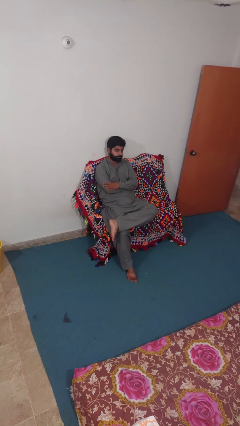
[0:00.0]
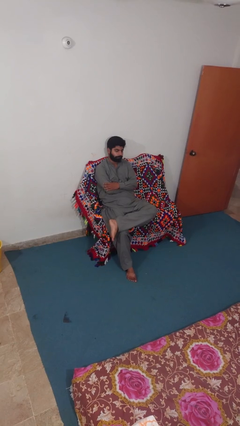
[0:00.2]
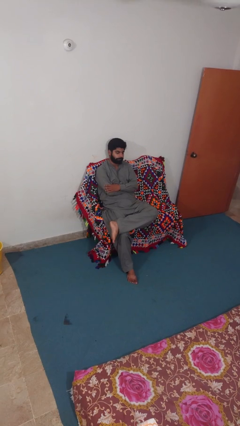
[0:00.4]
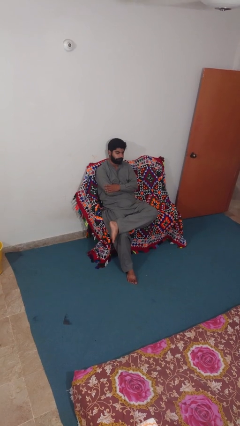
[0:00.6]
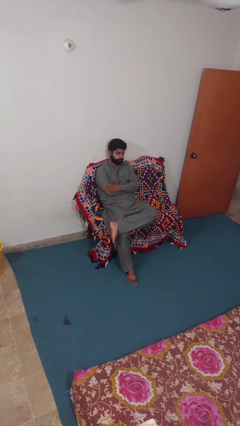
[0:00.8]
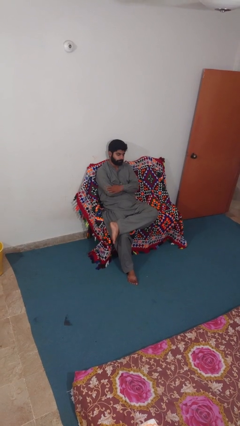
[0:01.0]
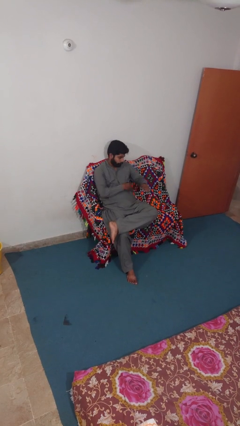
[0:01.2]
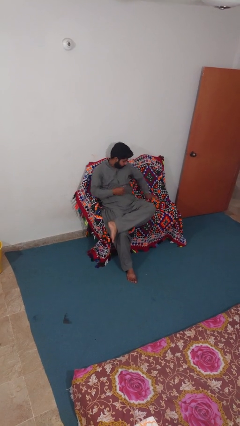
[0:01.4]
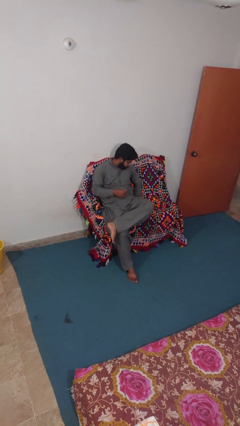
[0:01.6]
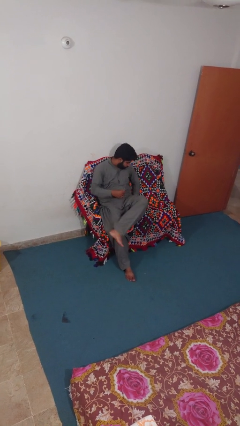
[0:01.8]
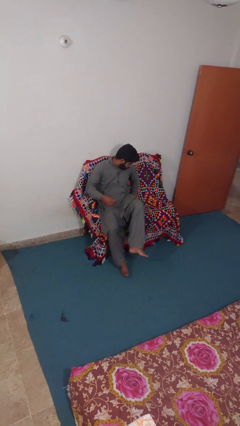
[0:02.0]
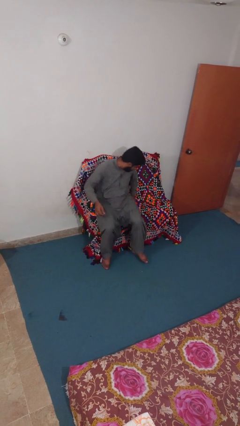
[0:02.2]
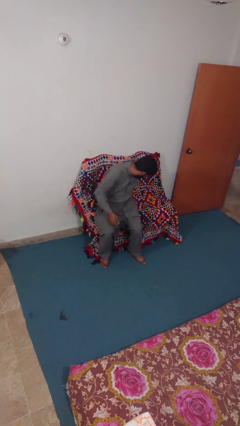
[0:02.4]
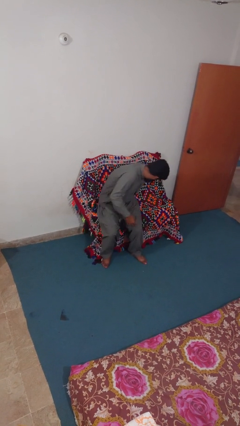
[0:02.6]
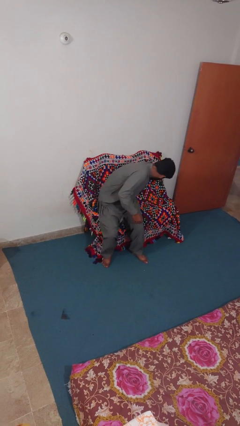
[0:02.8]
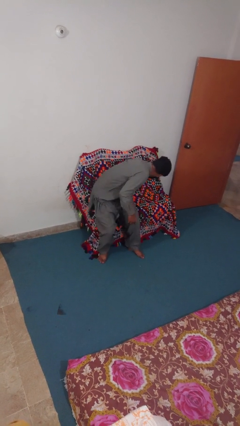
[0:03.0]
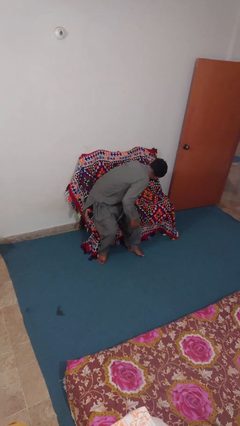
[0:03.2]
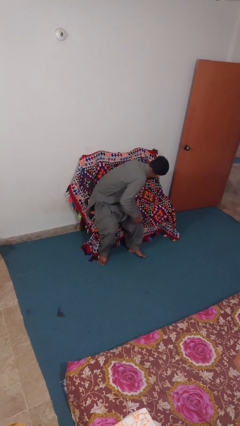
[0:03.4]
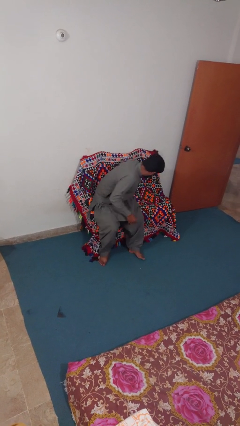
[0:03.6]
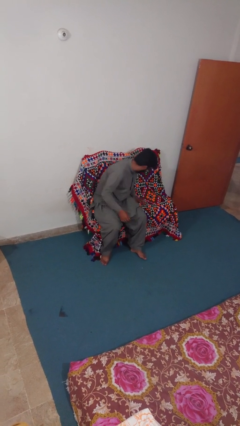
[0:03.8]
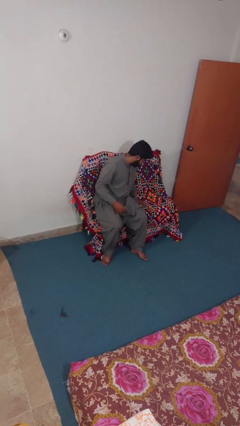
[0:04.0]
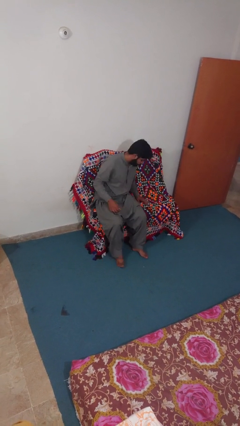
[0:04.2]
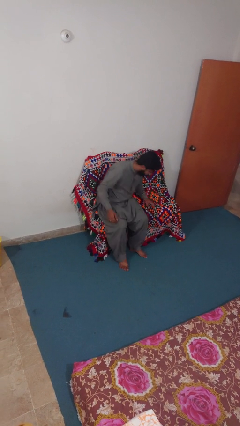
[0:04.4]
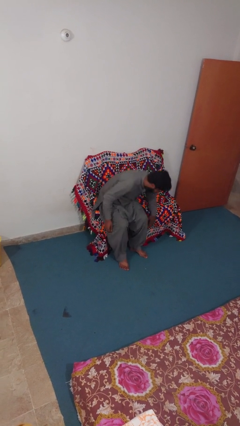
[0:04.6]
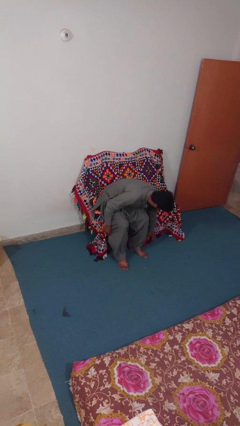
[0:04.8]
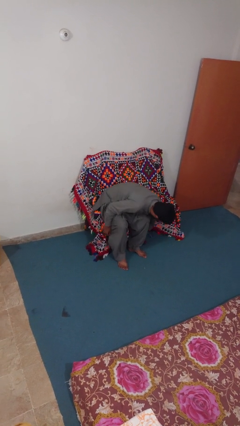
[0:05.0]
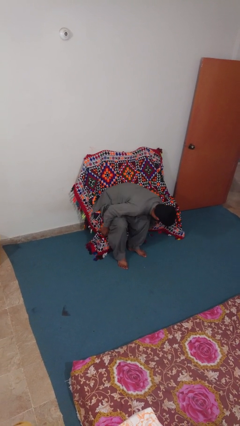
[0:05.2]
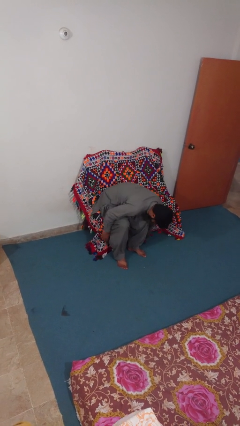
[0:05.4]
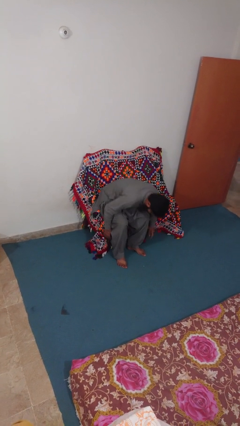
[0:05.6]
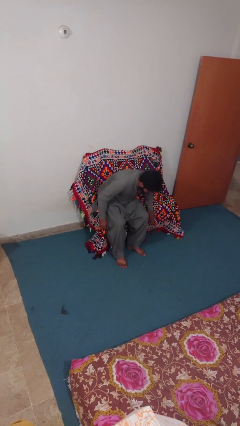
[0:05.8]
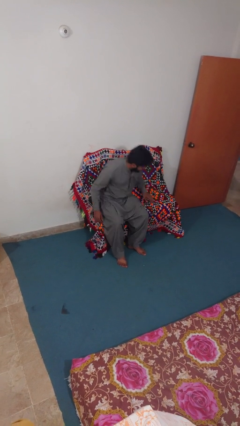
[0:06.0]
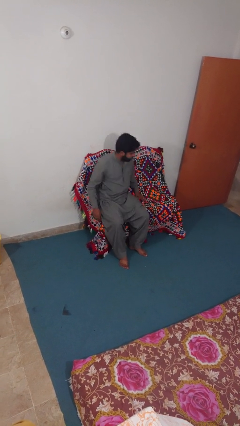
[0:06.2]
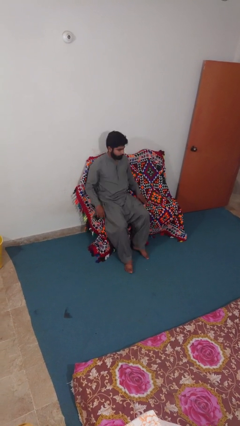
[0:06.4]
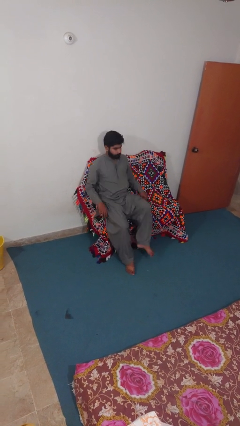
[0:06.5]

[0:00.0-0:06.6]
person searches in couch

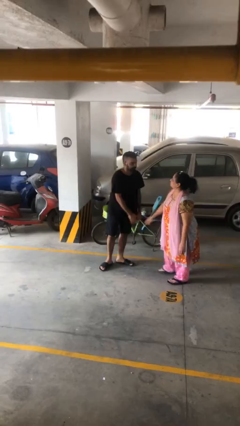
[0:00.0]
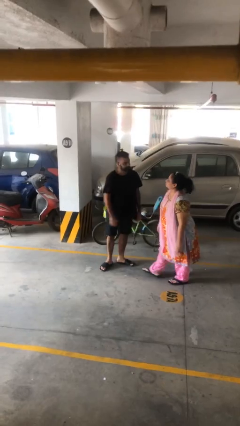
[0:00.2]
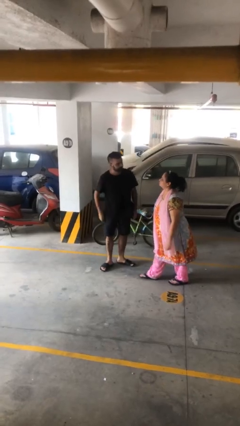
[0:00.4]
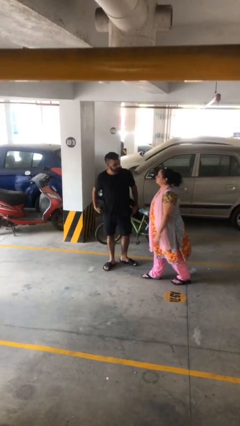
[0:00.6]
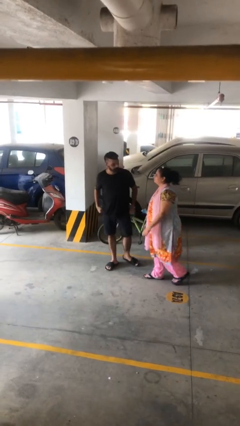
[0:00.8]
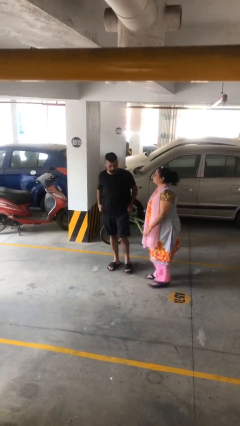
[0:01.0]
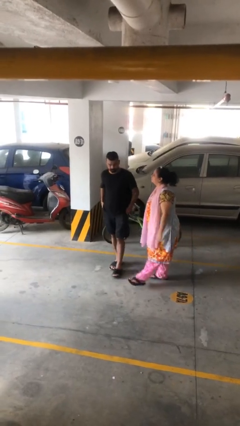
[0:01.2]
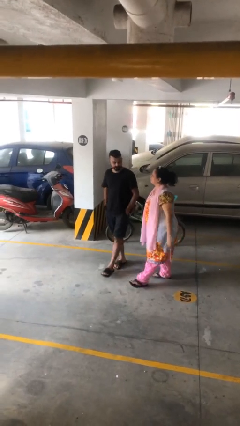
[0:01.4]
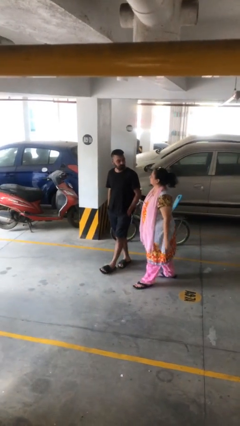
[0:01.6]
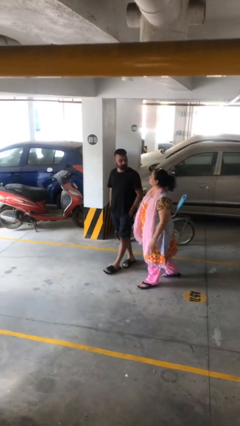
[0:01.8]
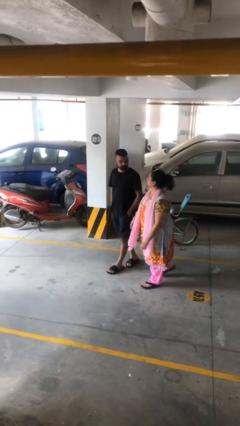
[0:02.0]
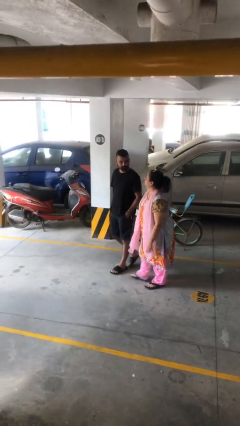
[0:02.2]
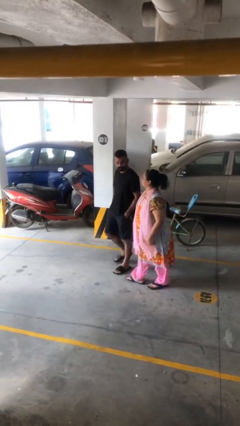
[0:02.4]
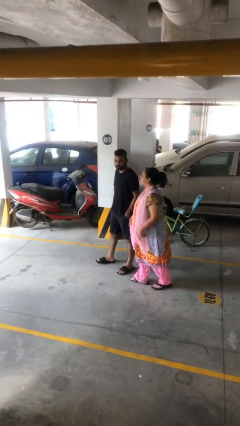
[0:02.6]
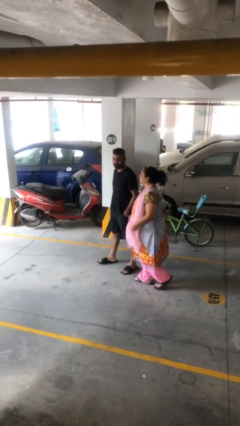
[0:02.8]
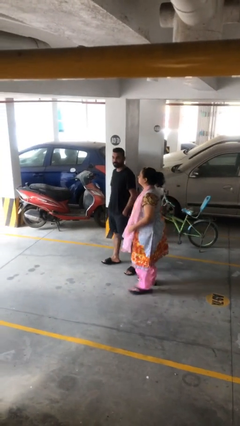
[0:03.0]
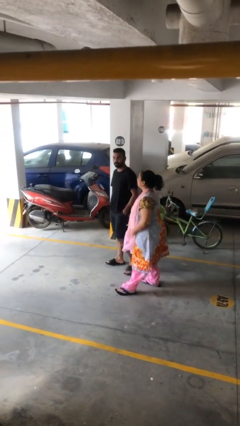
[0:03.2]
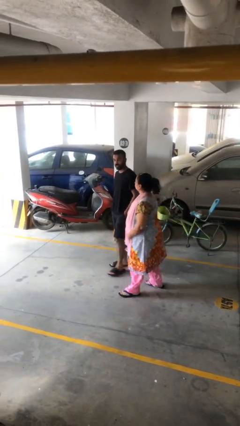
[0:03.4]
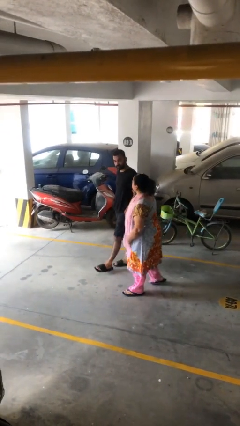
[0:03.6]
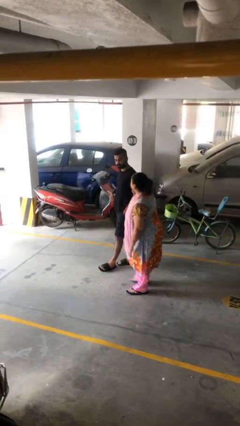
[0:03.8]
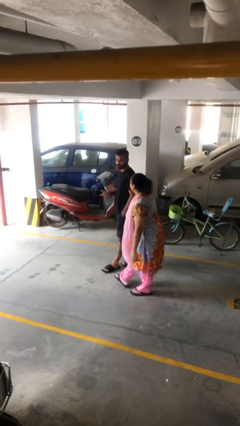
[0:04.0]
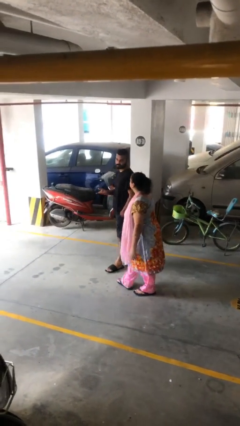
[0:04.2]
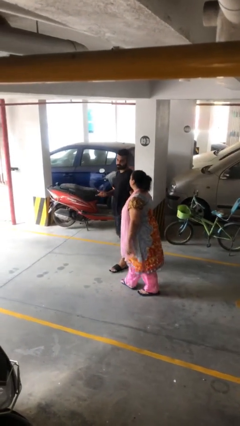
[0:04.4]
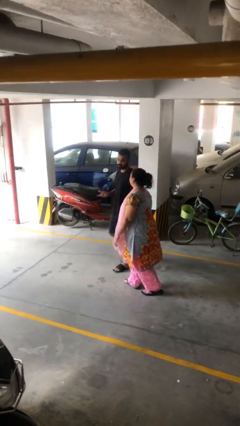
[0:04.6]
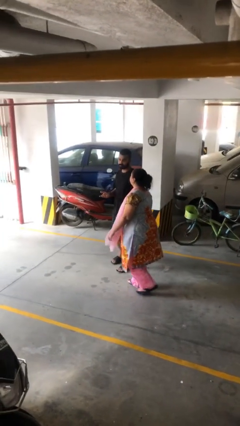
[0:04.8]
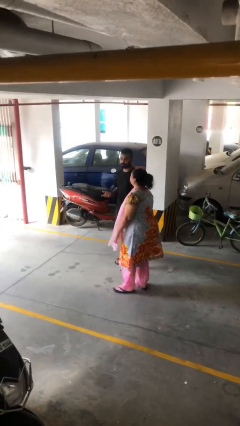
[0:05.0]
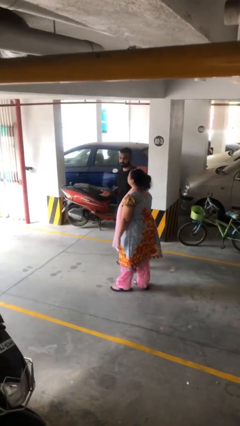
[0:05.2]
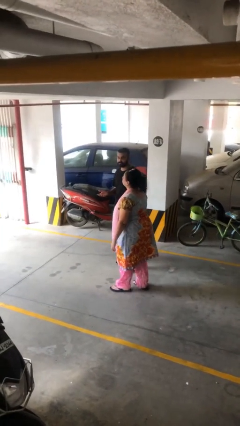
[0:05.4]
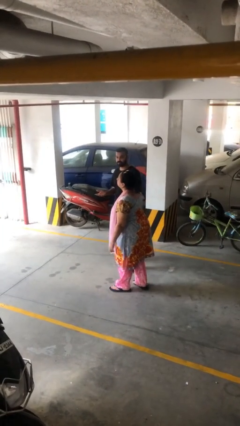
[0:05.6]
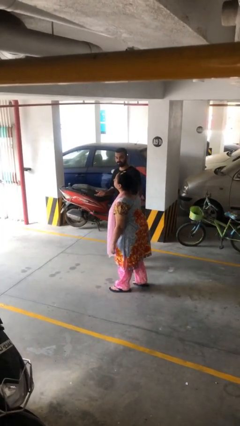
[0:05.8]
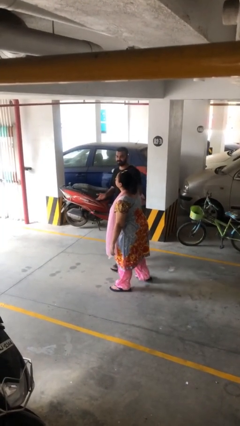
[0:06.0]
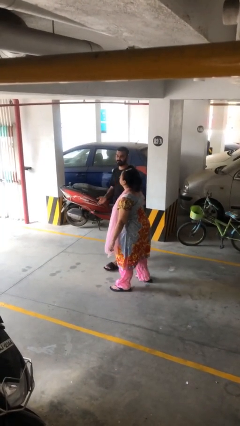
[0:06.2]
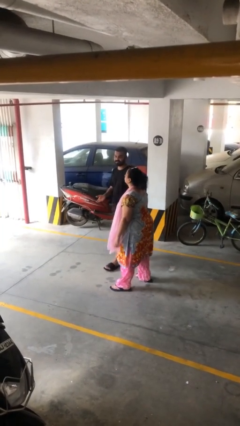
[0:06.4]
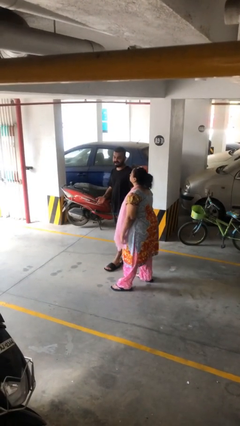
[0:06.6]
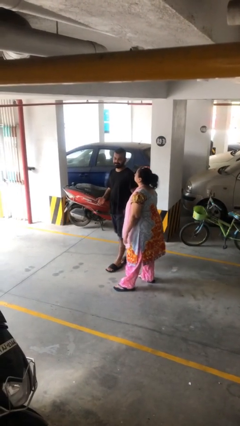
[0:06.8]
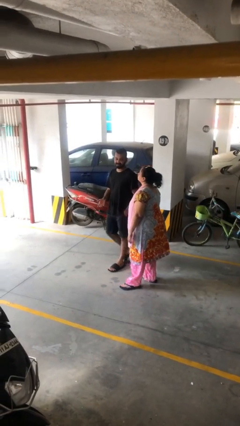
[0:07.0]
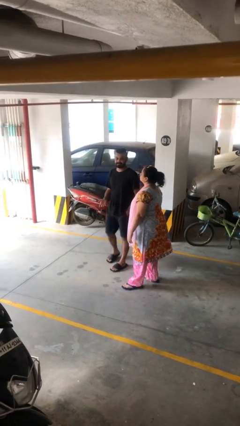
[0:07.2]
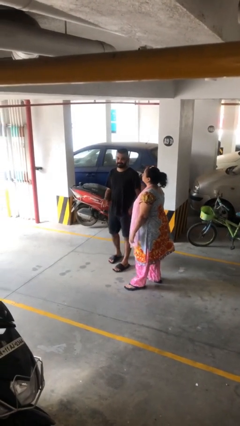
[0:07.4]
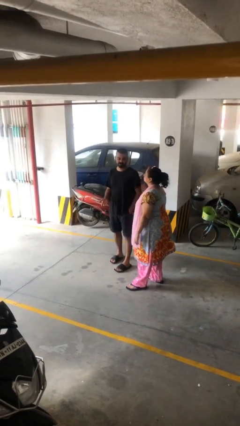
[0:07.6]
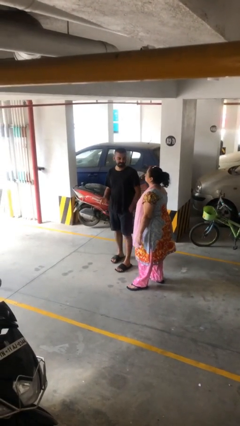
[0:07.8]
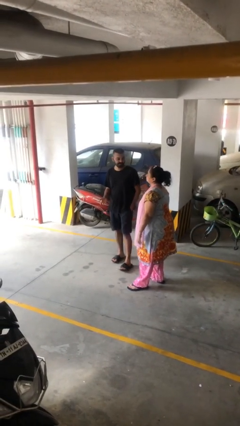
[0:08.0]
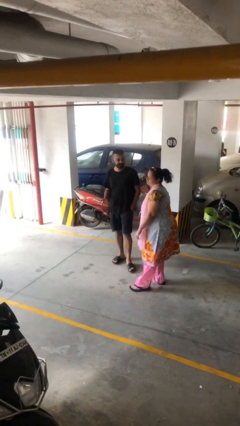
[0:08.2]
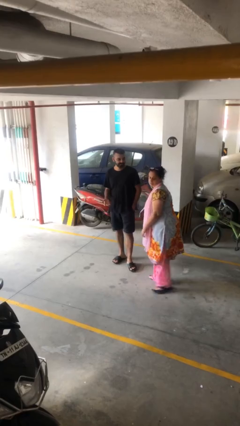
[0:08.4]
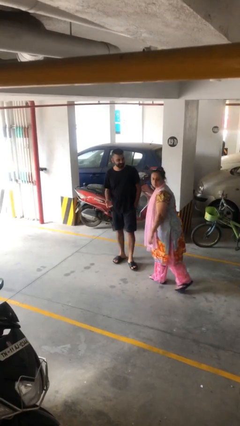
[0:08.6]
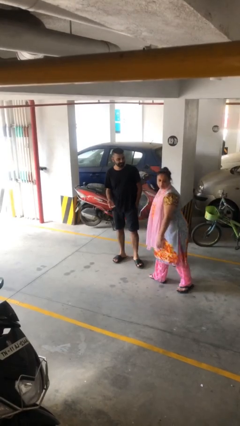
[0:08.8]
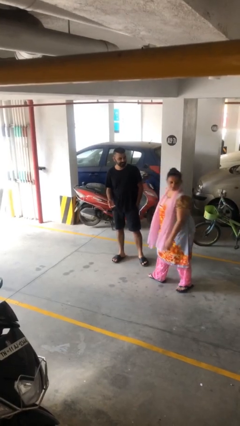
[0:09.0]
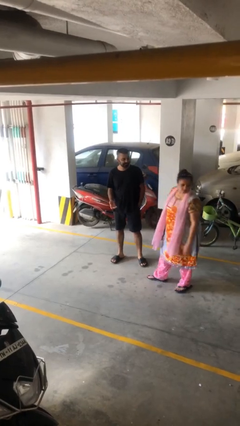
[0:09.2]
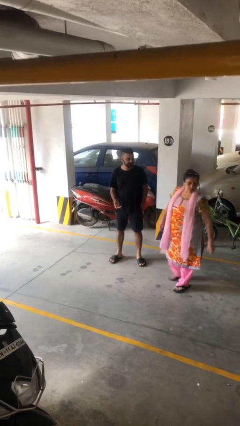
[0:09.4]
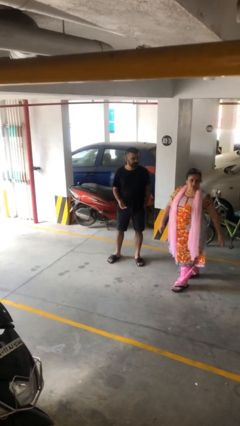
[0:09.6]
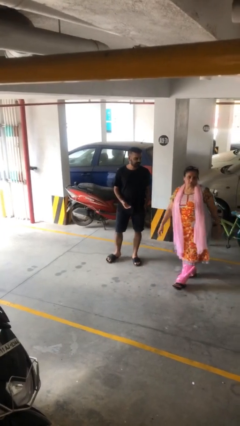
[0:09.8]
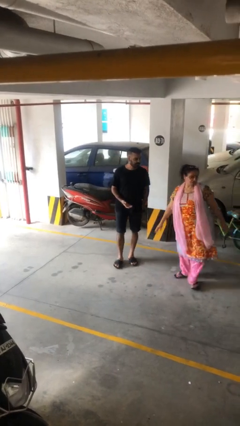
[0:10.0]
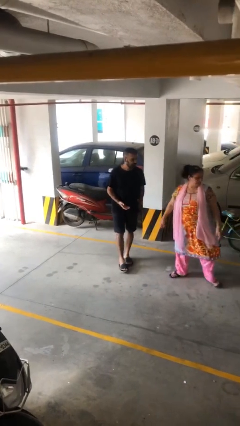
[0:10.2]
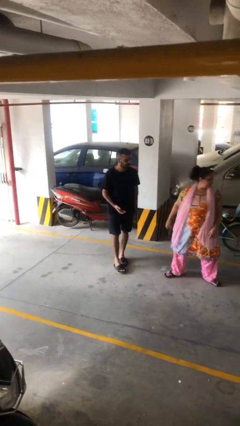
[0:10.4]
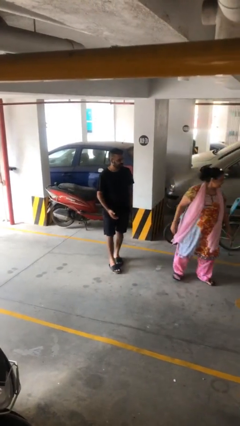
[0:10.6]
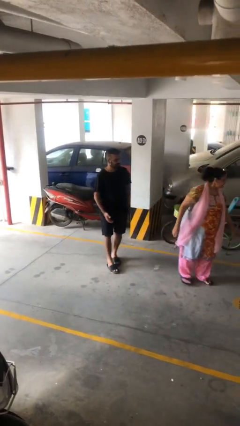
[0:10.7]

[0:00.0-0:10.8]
person talks to person

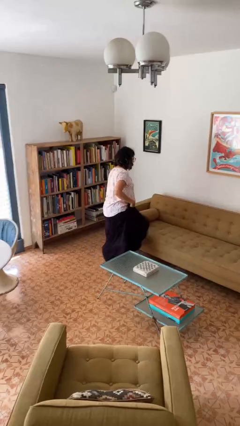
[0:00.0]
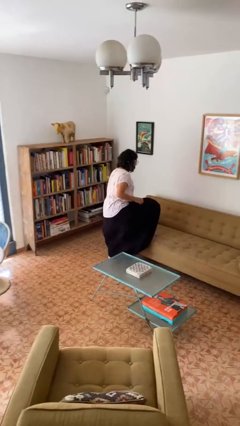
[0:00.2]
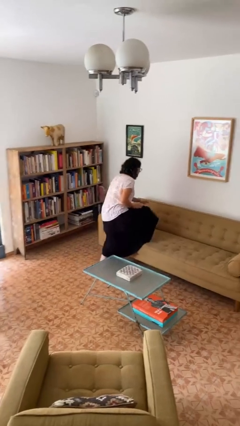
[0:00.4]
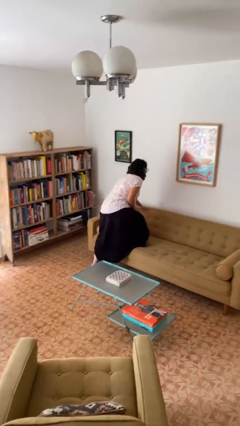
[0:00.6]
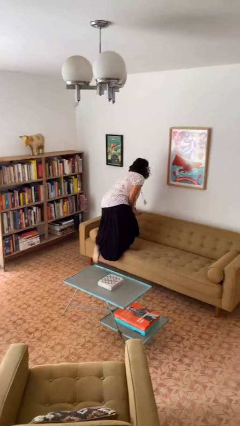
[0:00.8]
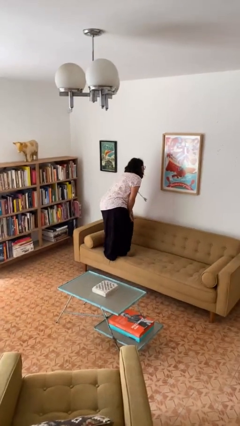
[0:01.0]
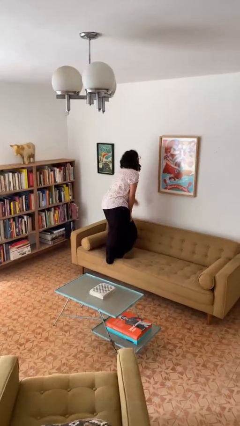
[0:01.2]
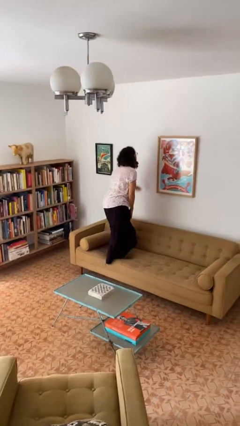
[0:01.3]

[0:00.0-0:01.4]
person climbs on couch
